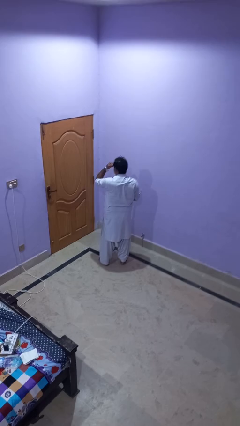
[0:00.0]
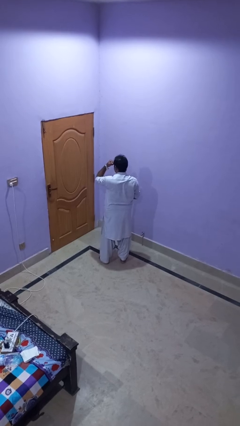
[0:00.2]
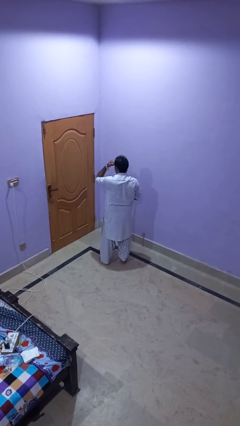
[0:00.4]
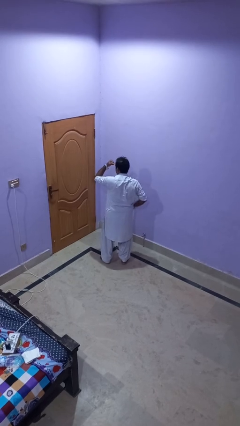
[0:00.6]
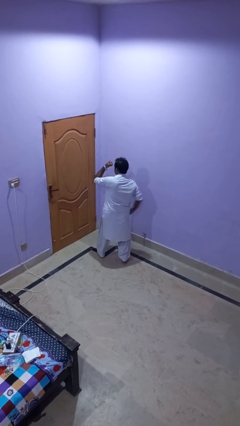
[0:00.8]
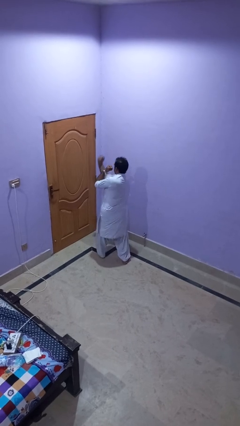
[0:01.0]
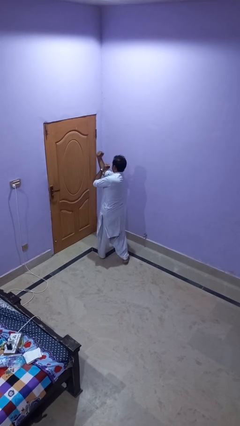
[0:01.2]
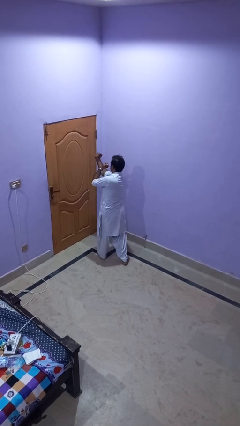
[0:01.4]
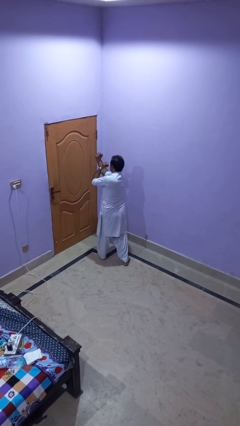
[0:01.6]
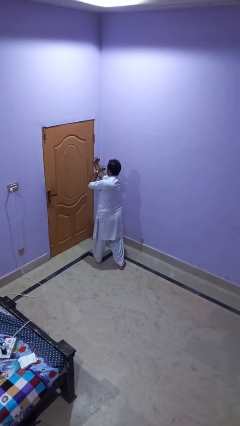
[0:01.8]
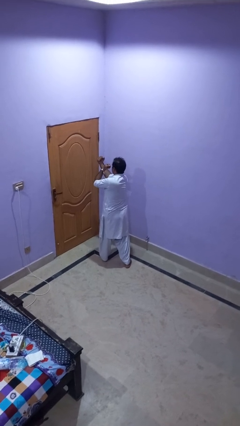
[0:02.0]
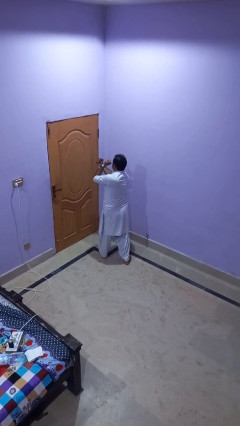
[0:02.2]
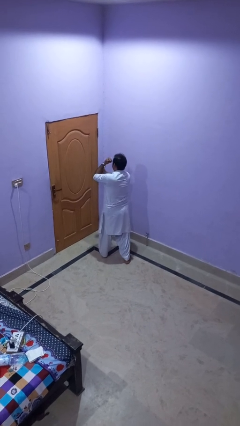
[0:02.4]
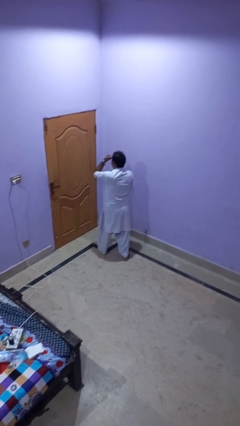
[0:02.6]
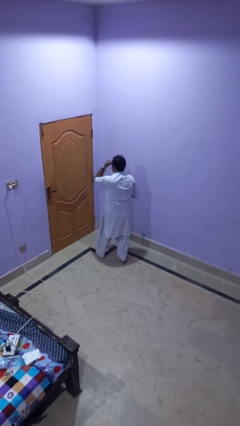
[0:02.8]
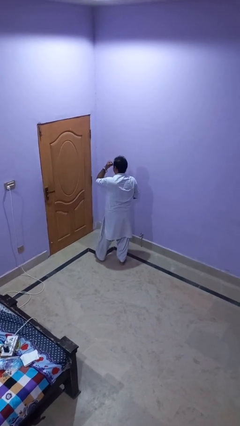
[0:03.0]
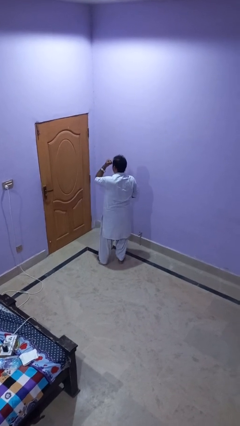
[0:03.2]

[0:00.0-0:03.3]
person punches

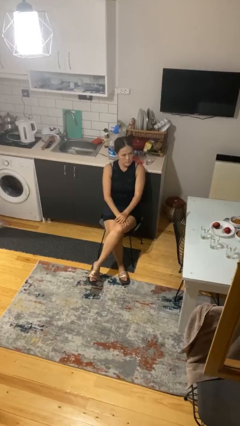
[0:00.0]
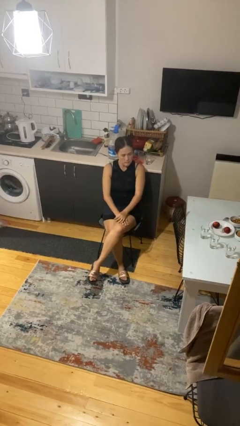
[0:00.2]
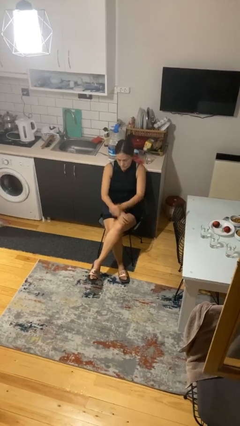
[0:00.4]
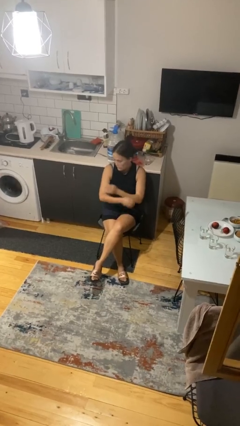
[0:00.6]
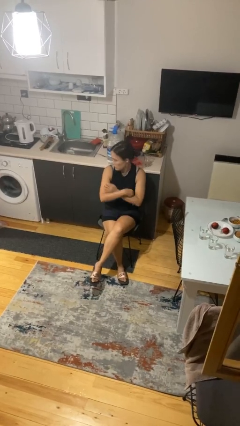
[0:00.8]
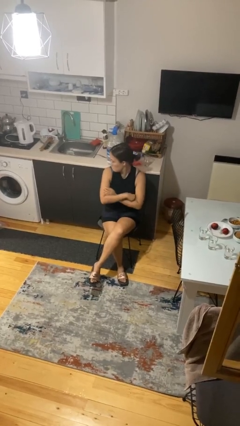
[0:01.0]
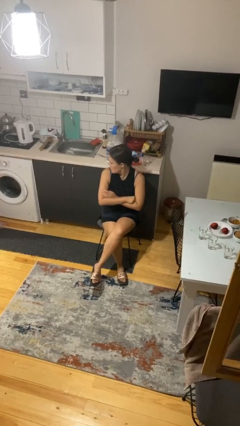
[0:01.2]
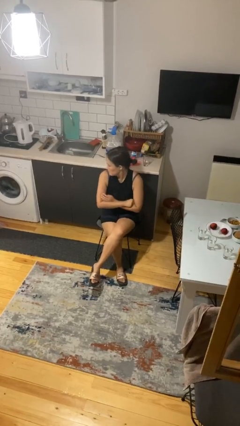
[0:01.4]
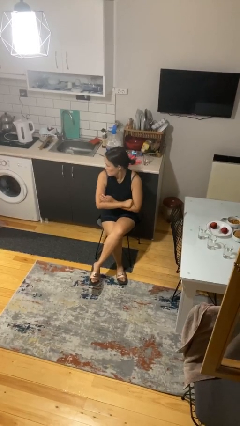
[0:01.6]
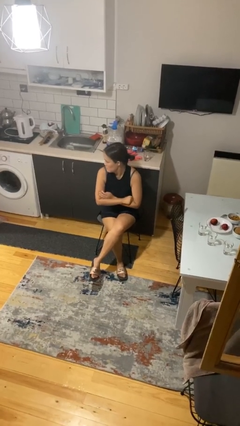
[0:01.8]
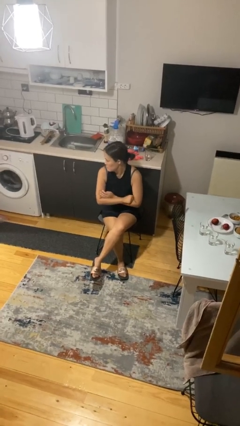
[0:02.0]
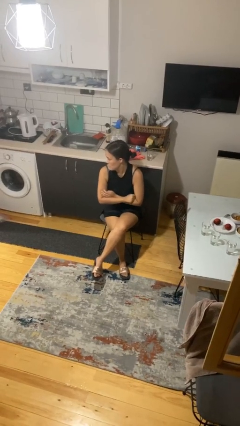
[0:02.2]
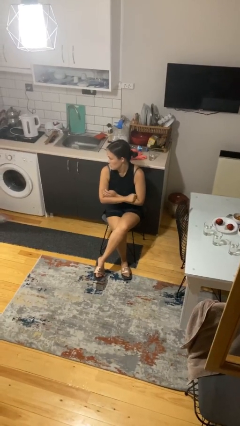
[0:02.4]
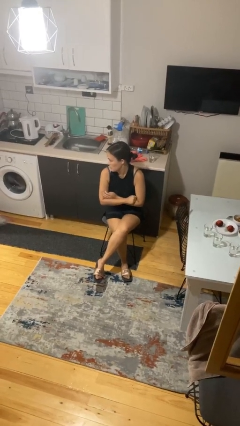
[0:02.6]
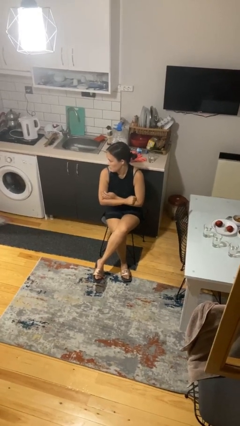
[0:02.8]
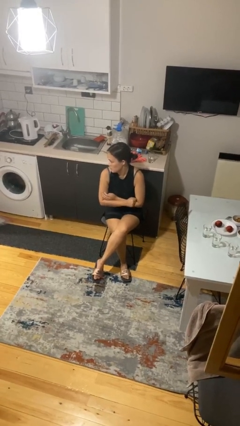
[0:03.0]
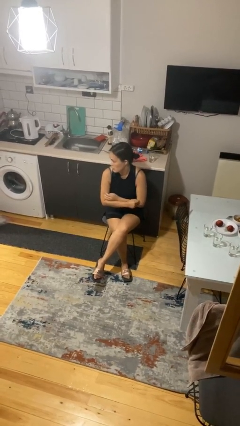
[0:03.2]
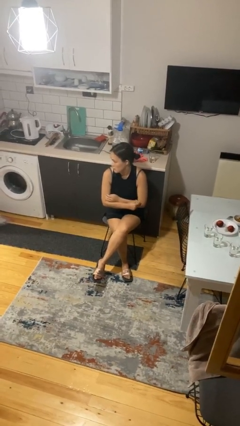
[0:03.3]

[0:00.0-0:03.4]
person crosses arms

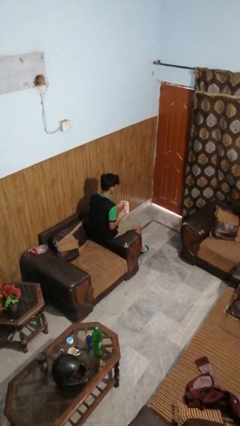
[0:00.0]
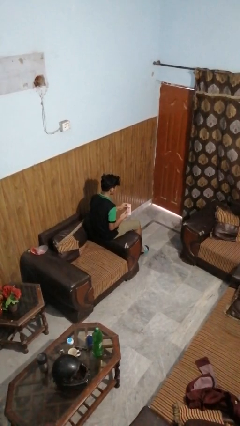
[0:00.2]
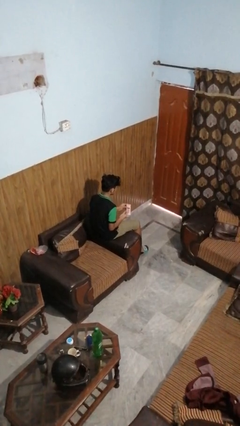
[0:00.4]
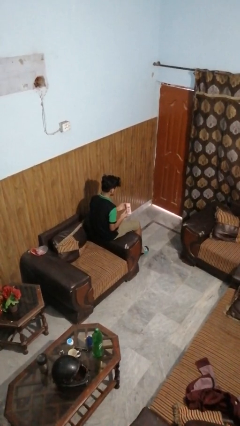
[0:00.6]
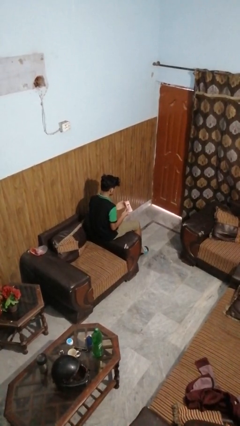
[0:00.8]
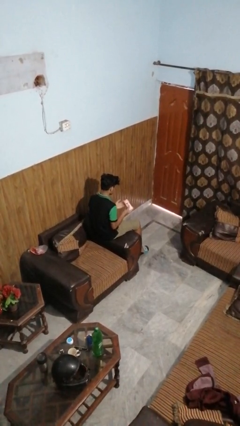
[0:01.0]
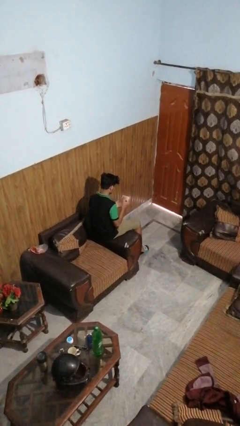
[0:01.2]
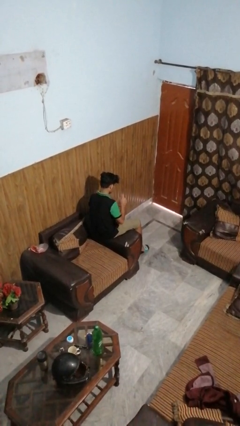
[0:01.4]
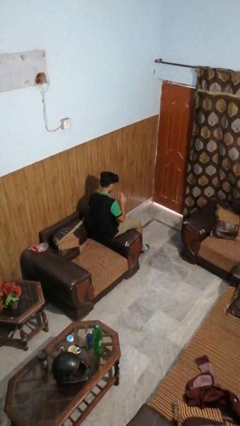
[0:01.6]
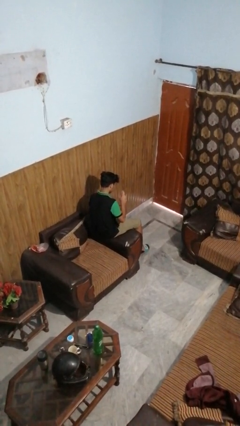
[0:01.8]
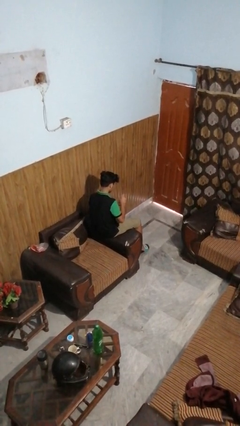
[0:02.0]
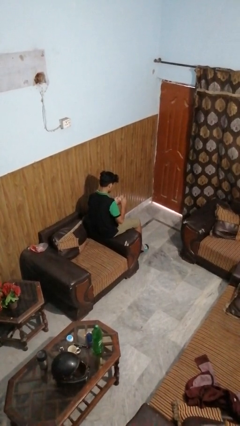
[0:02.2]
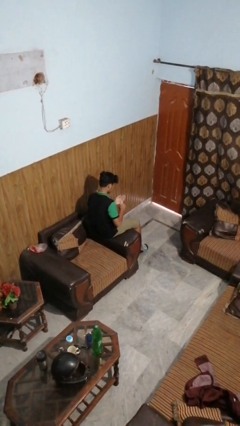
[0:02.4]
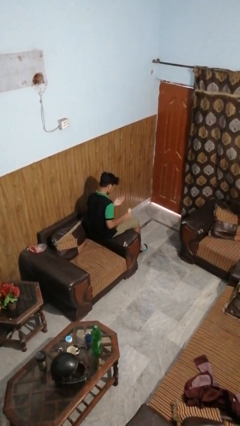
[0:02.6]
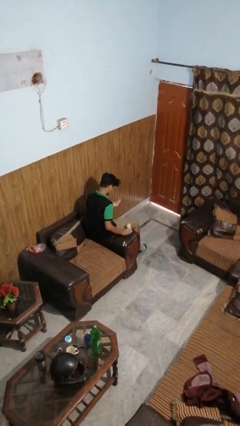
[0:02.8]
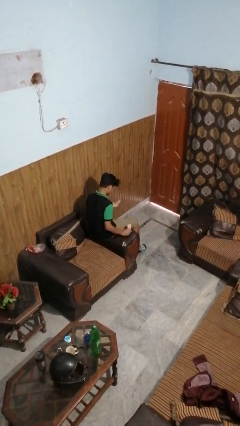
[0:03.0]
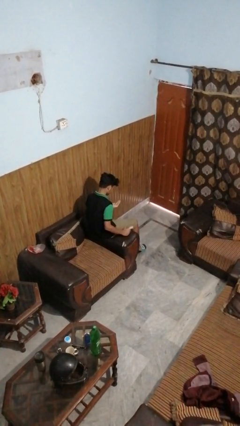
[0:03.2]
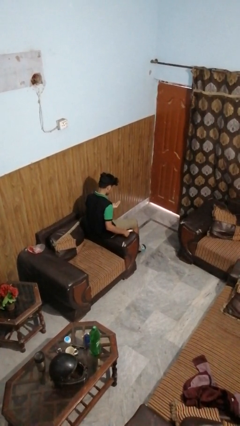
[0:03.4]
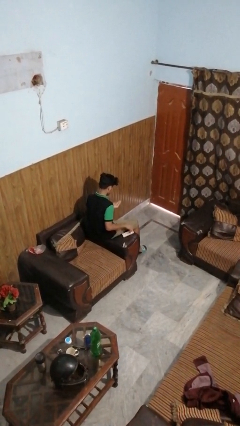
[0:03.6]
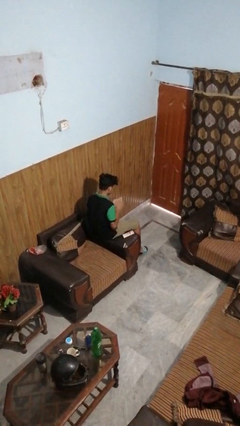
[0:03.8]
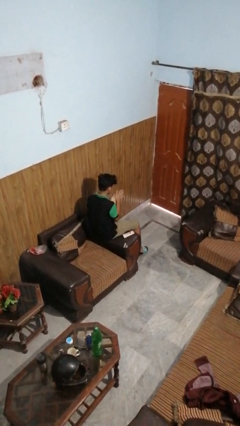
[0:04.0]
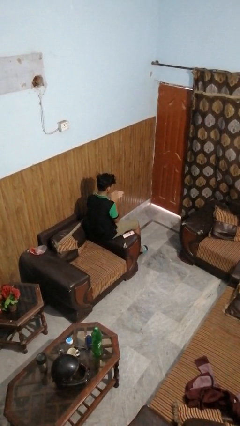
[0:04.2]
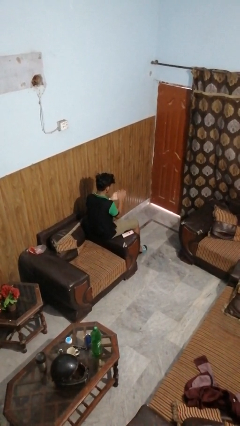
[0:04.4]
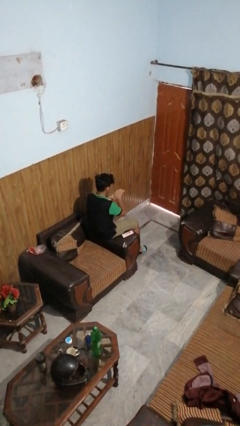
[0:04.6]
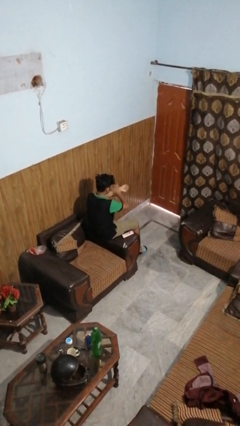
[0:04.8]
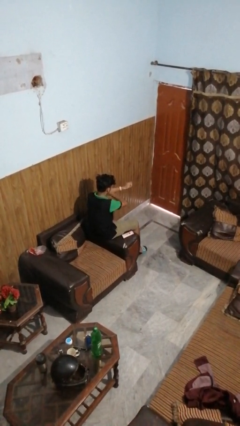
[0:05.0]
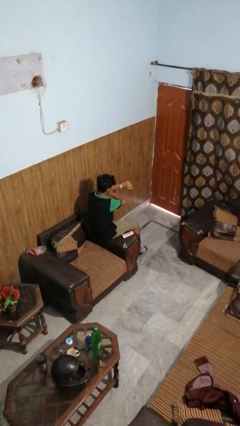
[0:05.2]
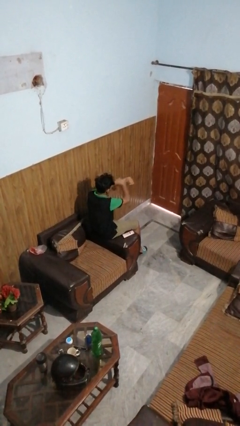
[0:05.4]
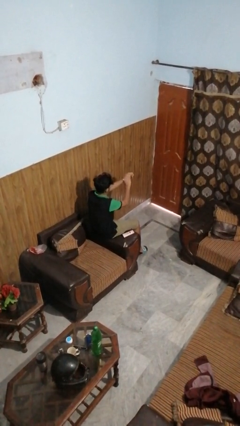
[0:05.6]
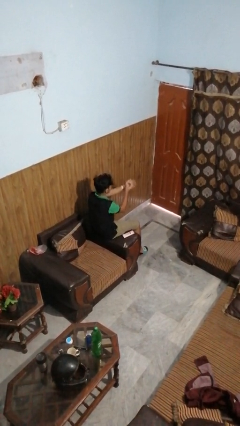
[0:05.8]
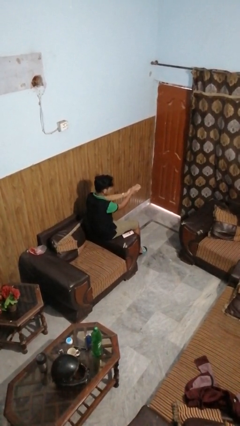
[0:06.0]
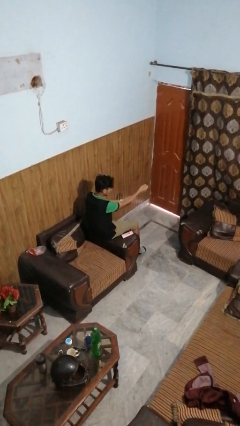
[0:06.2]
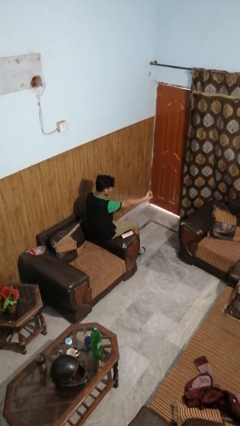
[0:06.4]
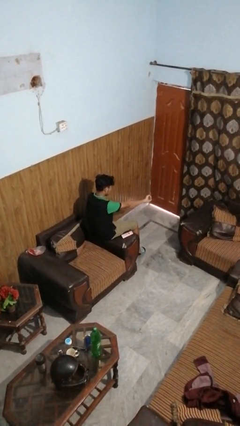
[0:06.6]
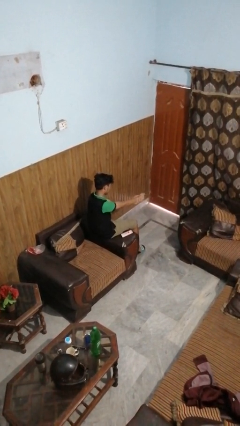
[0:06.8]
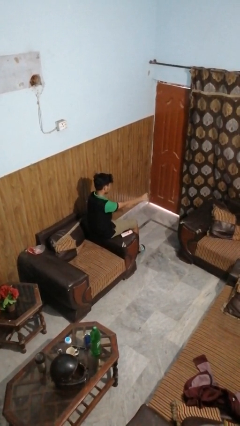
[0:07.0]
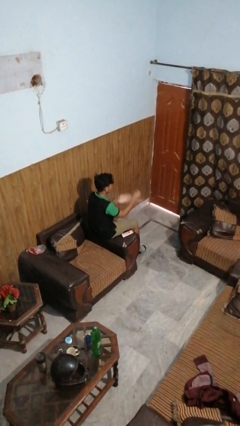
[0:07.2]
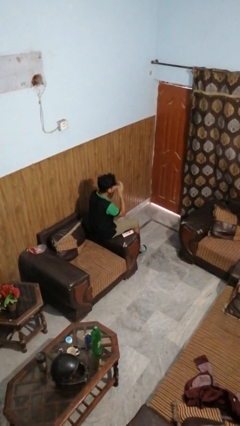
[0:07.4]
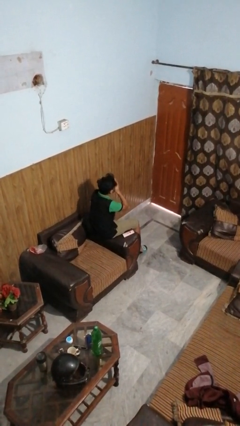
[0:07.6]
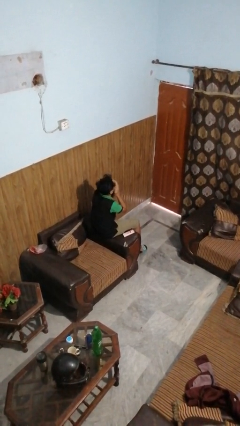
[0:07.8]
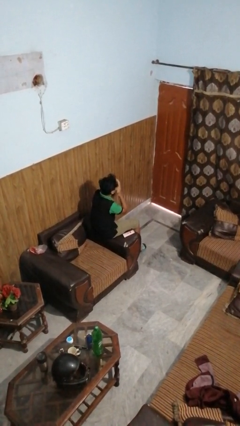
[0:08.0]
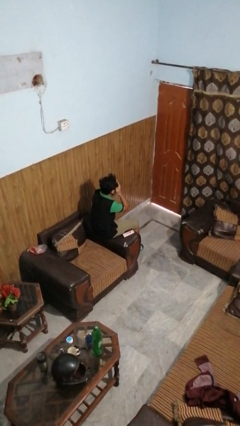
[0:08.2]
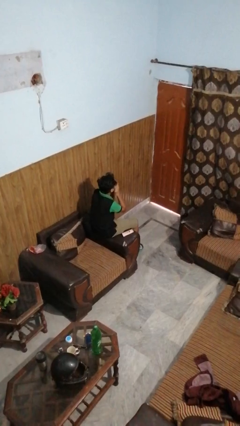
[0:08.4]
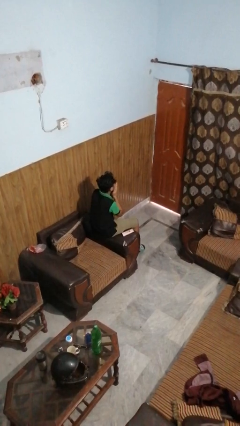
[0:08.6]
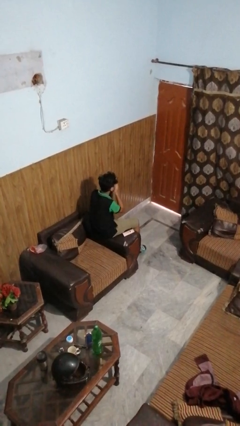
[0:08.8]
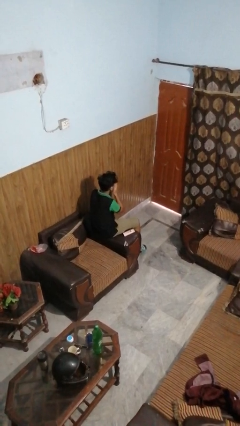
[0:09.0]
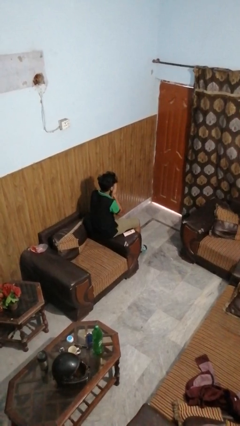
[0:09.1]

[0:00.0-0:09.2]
person applies sunscreen

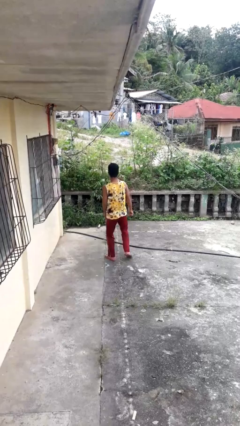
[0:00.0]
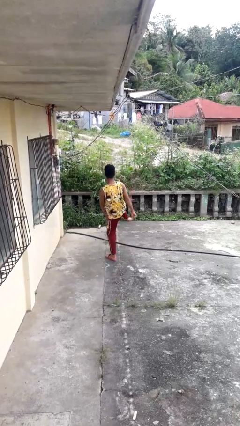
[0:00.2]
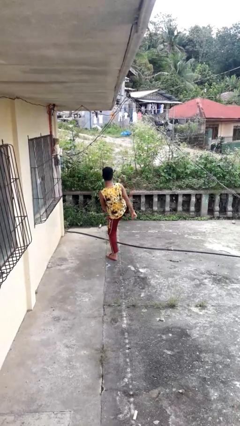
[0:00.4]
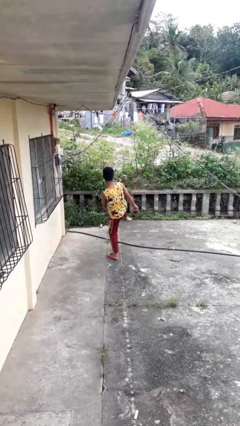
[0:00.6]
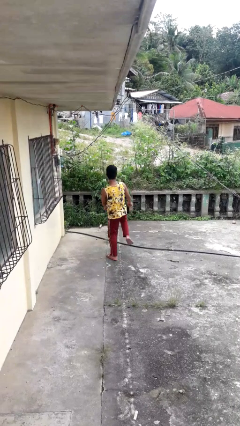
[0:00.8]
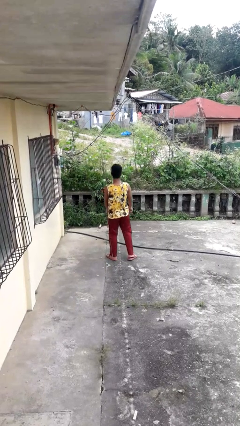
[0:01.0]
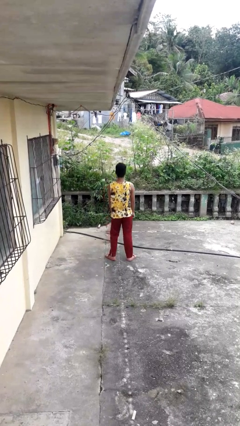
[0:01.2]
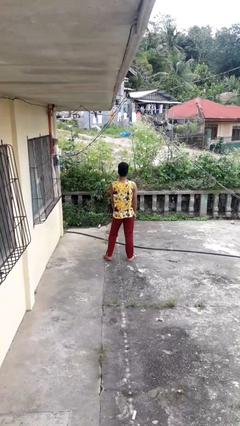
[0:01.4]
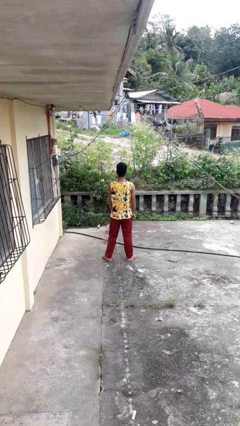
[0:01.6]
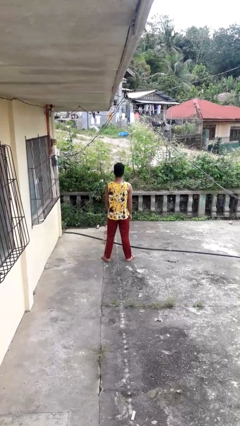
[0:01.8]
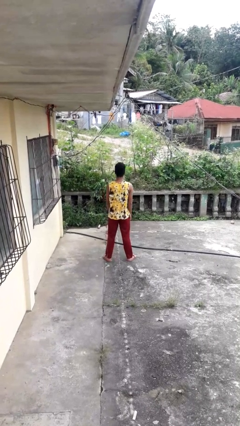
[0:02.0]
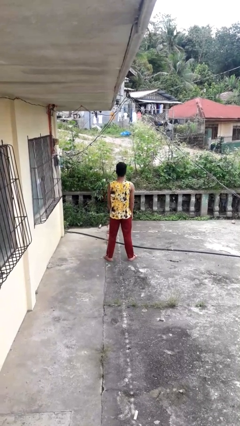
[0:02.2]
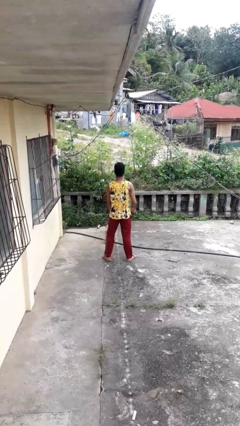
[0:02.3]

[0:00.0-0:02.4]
person karate kicks
